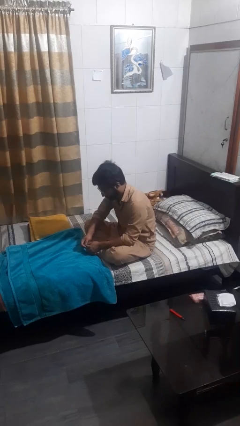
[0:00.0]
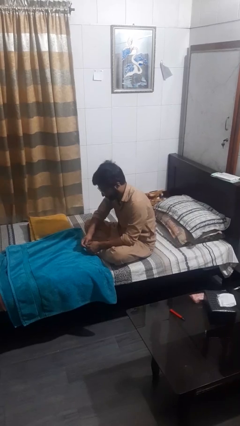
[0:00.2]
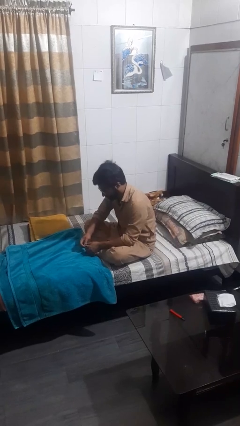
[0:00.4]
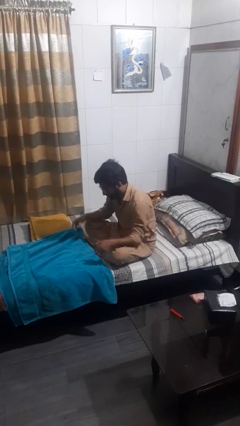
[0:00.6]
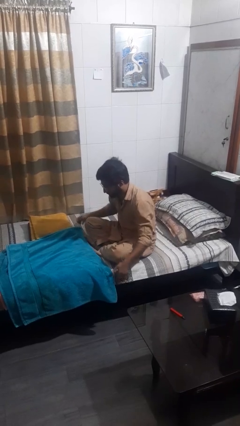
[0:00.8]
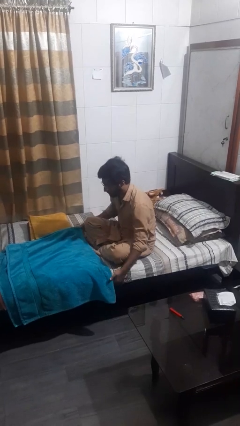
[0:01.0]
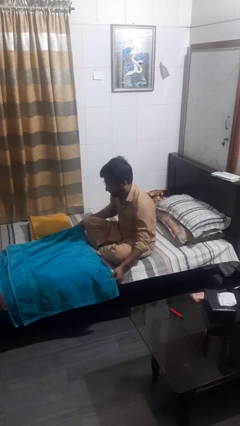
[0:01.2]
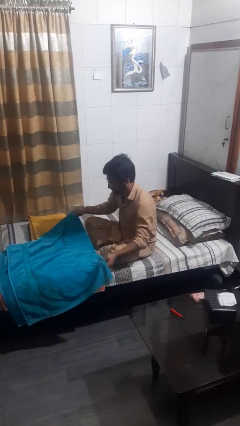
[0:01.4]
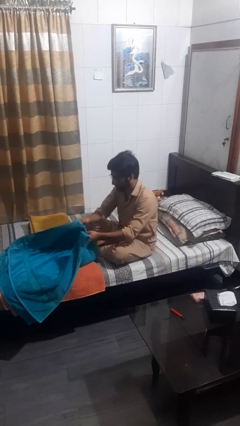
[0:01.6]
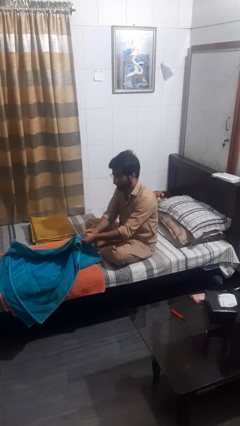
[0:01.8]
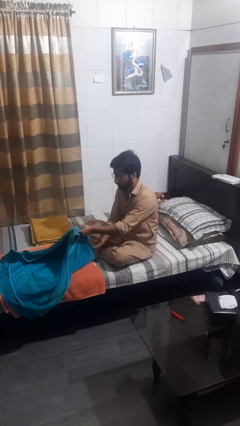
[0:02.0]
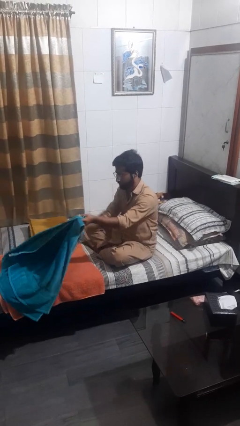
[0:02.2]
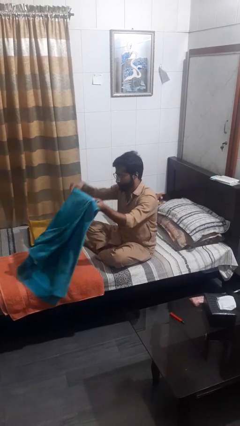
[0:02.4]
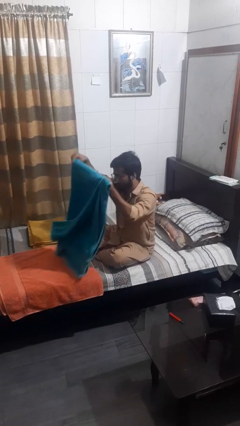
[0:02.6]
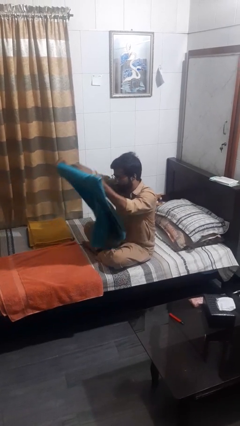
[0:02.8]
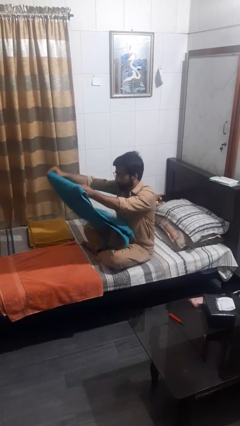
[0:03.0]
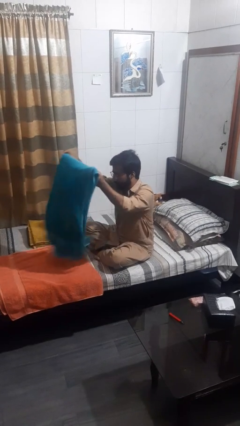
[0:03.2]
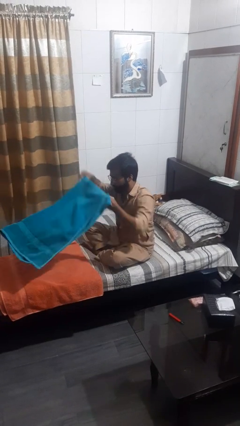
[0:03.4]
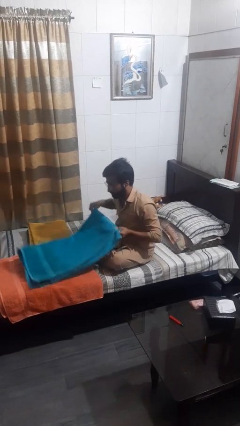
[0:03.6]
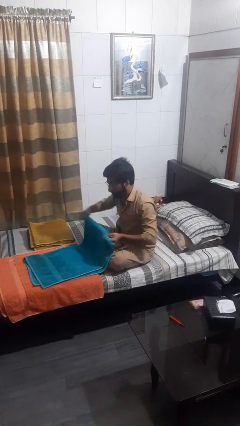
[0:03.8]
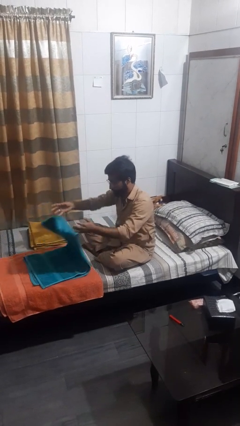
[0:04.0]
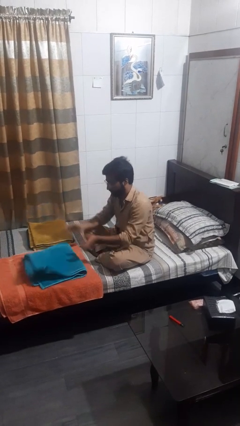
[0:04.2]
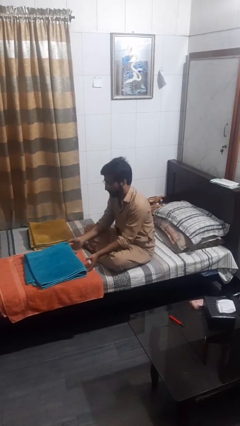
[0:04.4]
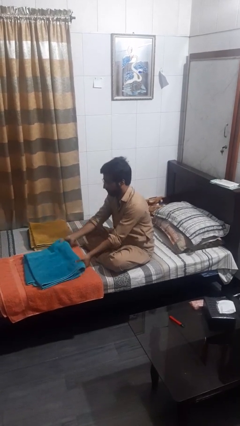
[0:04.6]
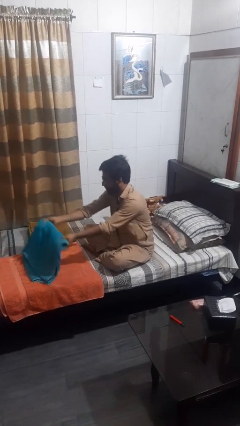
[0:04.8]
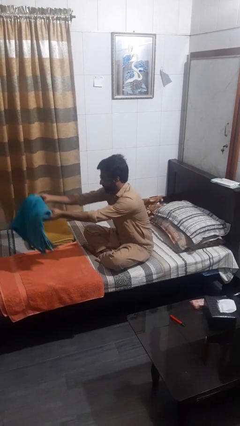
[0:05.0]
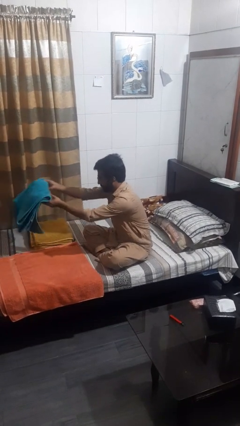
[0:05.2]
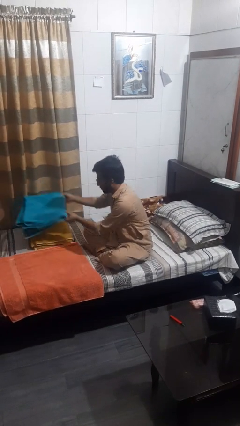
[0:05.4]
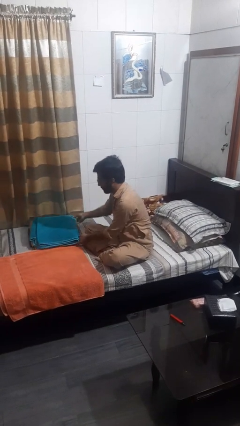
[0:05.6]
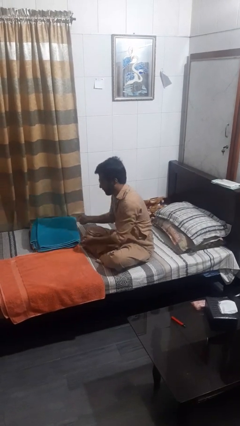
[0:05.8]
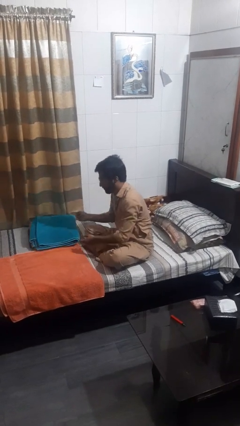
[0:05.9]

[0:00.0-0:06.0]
person folds towel

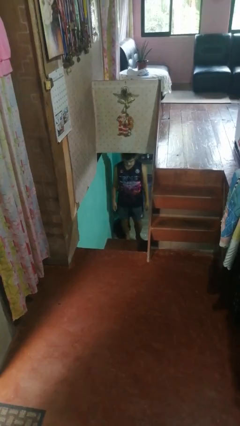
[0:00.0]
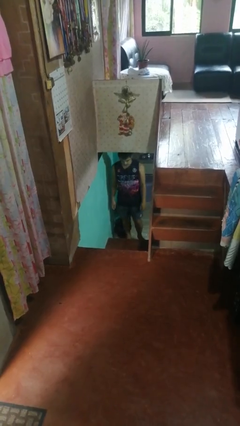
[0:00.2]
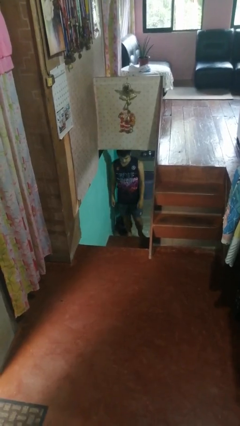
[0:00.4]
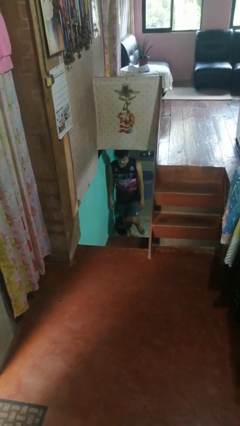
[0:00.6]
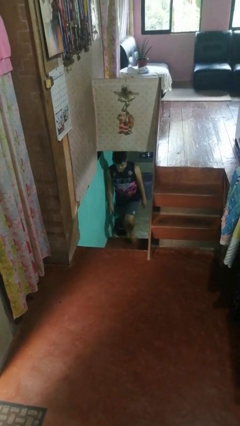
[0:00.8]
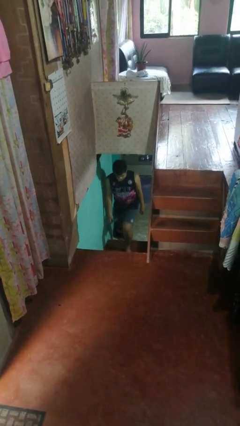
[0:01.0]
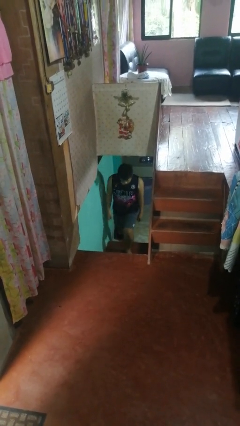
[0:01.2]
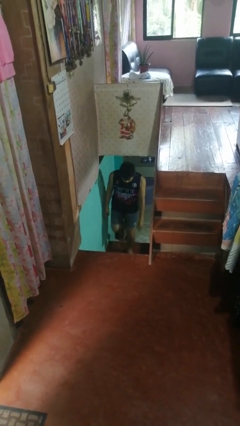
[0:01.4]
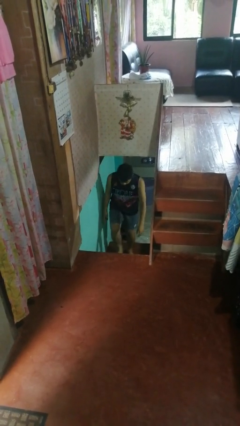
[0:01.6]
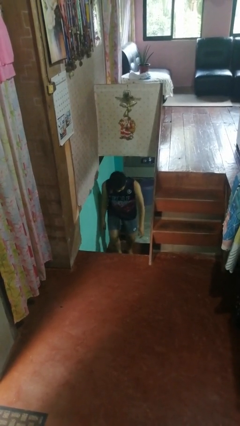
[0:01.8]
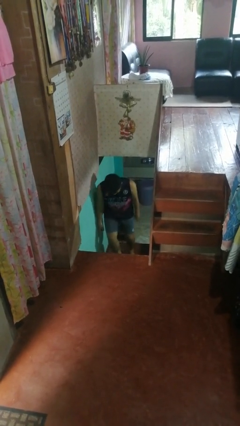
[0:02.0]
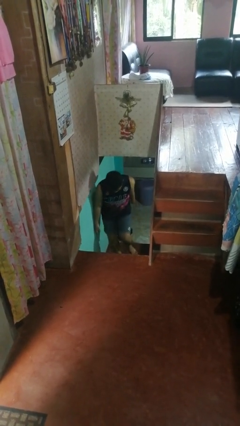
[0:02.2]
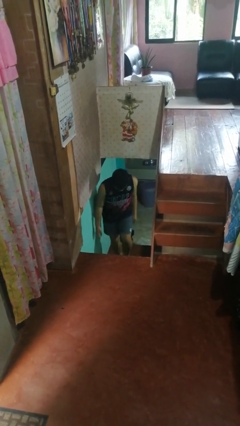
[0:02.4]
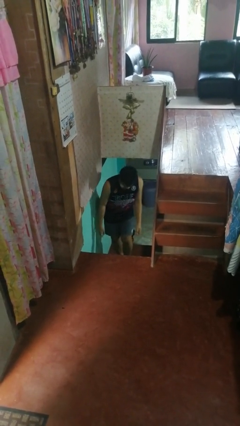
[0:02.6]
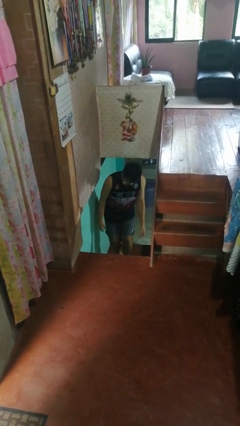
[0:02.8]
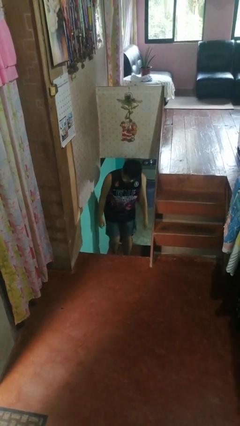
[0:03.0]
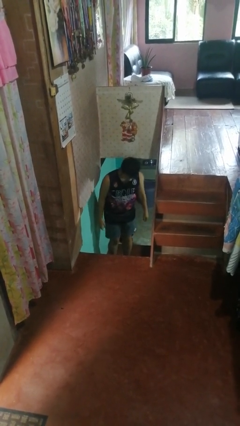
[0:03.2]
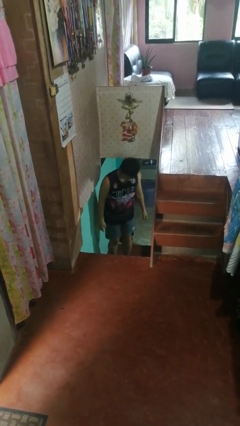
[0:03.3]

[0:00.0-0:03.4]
person climbs up stairs

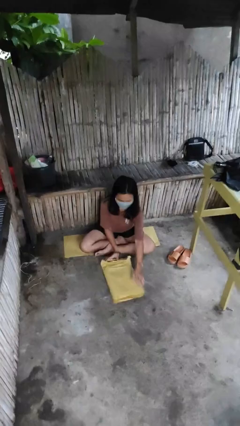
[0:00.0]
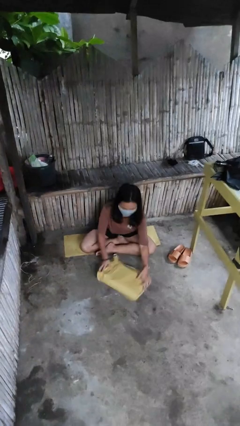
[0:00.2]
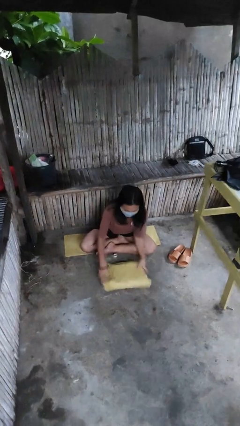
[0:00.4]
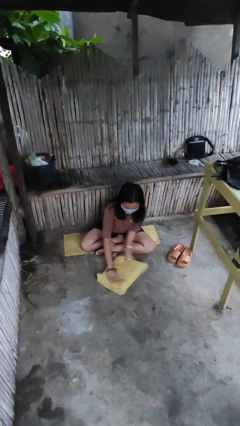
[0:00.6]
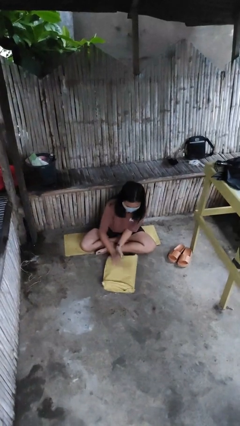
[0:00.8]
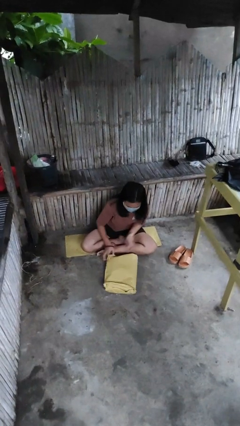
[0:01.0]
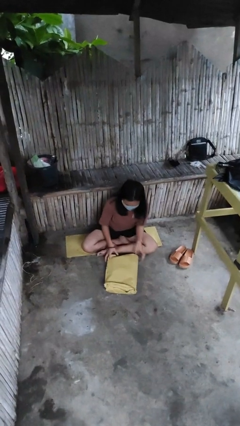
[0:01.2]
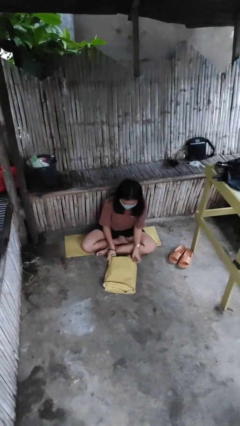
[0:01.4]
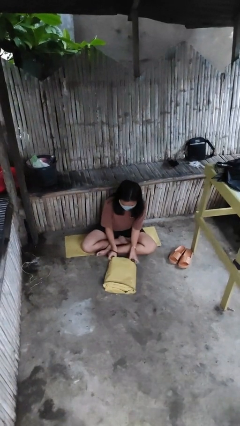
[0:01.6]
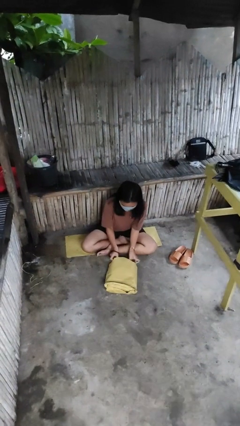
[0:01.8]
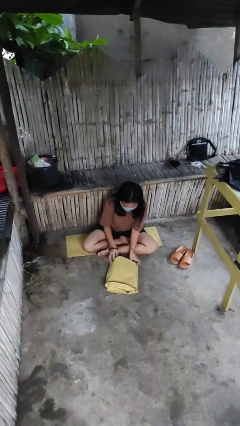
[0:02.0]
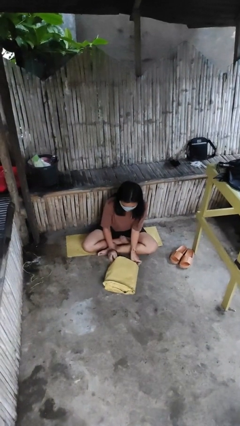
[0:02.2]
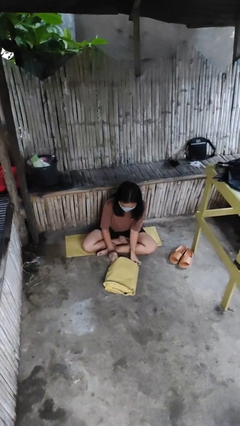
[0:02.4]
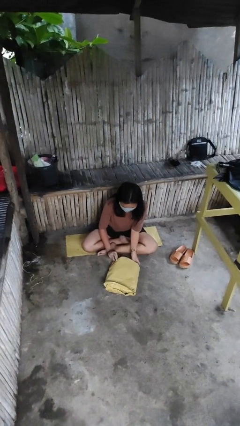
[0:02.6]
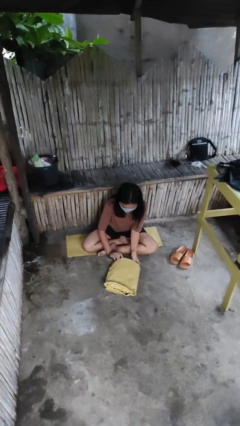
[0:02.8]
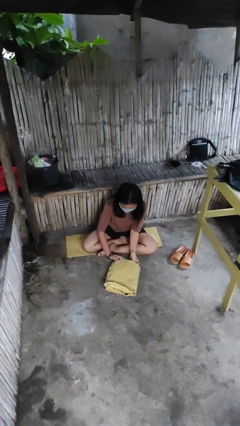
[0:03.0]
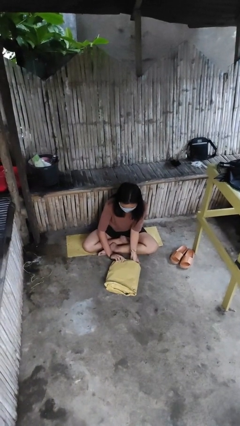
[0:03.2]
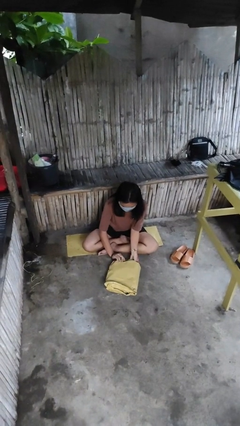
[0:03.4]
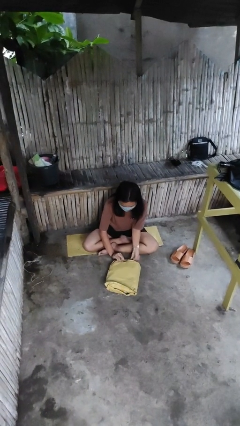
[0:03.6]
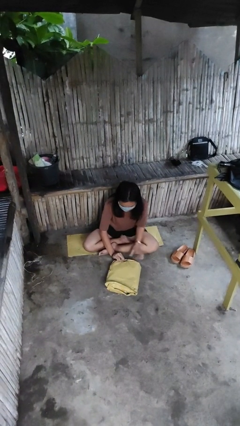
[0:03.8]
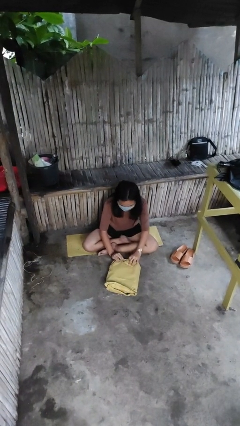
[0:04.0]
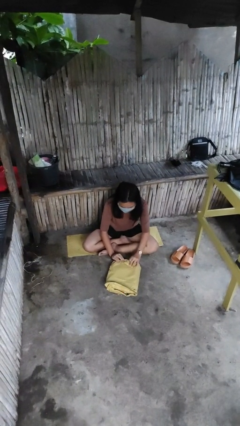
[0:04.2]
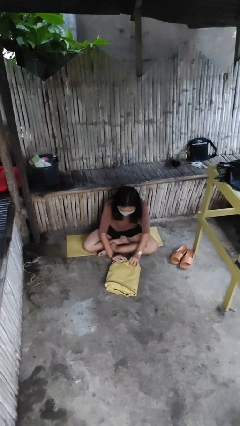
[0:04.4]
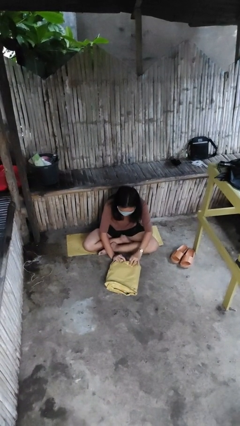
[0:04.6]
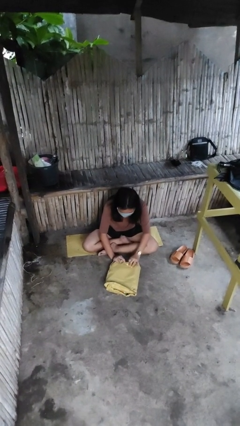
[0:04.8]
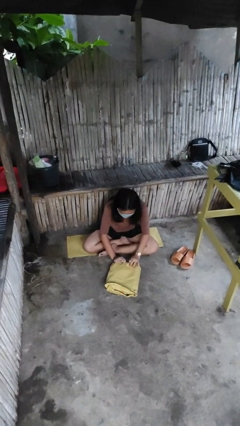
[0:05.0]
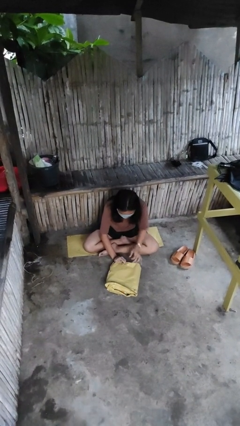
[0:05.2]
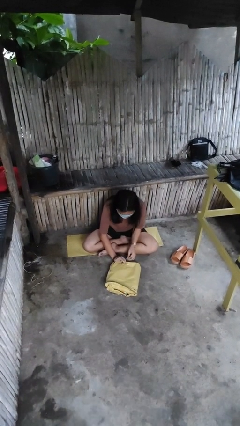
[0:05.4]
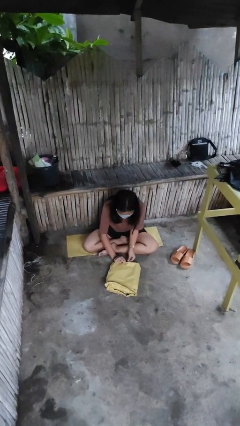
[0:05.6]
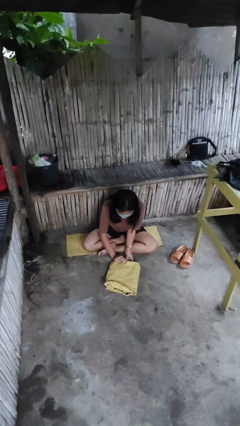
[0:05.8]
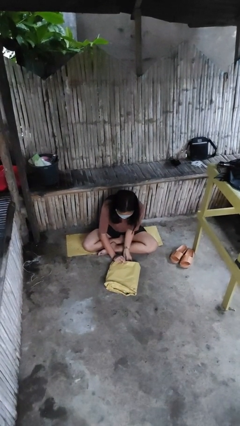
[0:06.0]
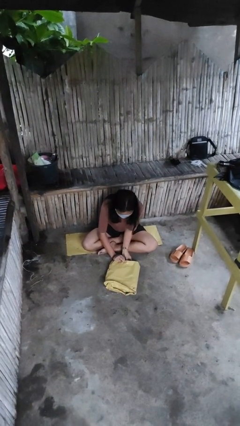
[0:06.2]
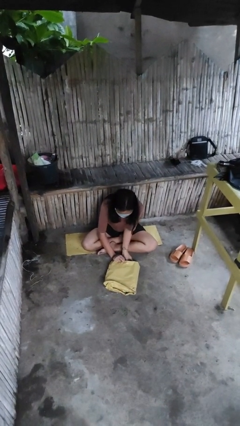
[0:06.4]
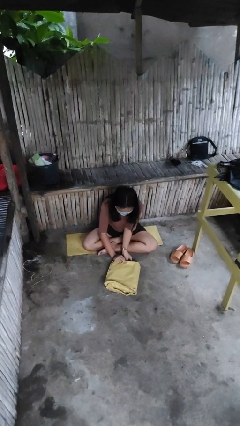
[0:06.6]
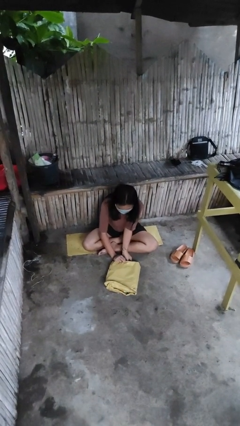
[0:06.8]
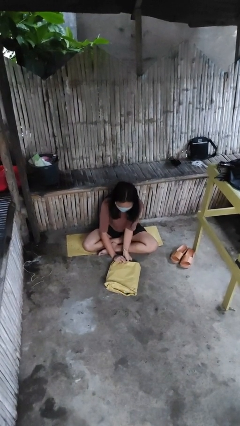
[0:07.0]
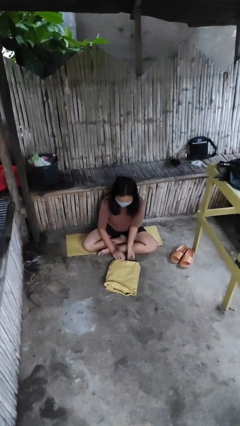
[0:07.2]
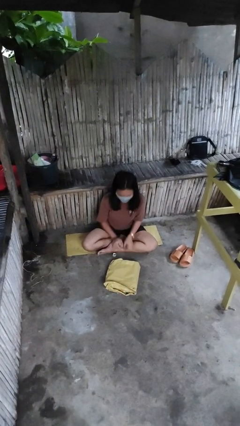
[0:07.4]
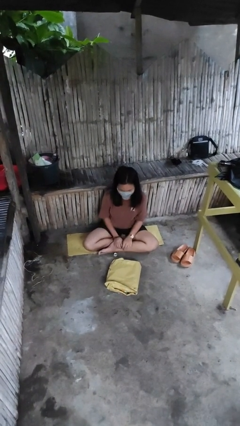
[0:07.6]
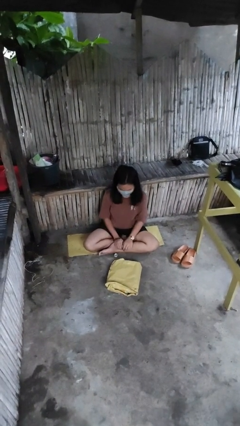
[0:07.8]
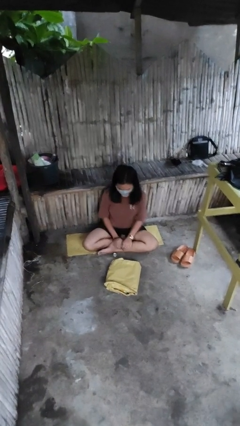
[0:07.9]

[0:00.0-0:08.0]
person wraps box

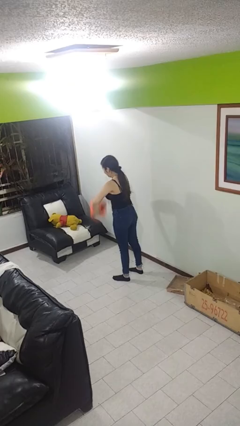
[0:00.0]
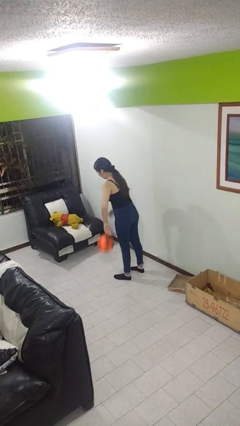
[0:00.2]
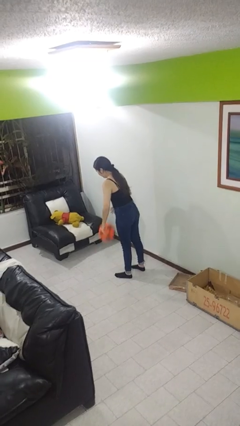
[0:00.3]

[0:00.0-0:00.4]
person bounces ball on floor
